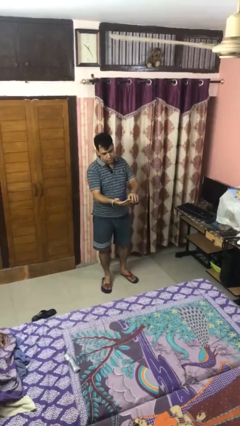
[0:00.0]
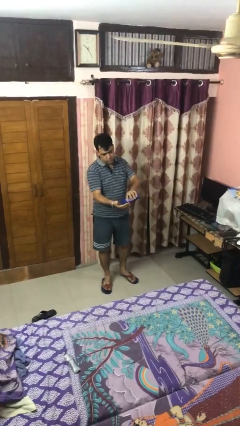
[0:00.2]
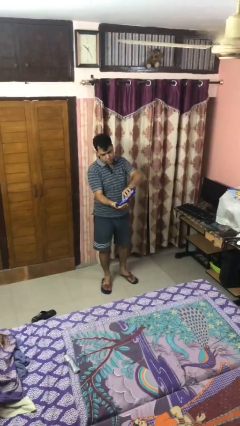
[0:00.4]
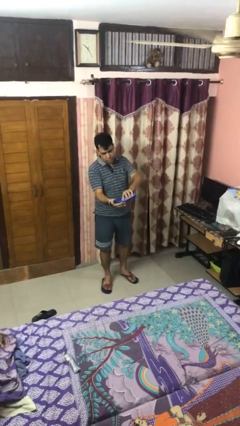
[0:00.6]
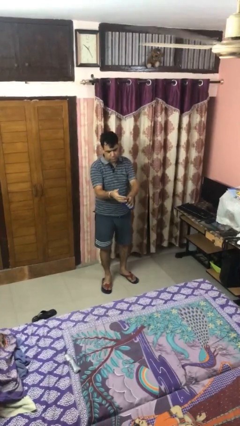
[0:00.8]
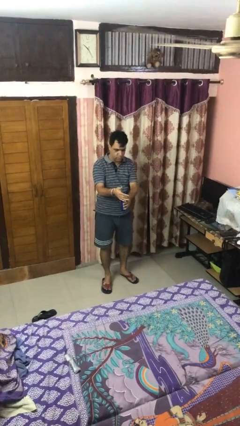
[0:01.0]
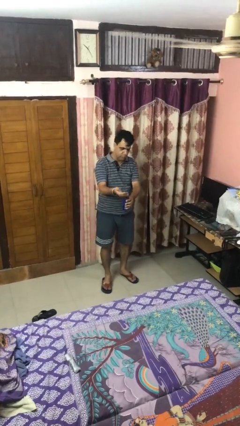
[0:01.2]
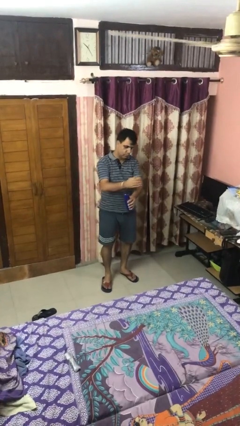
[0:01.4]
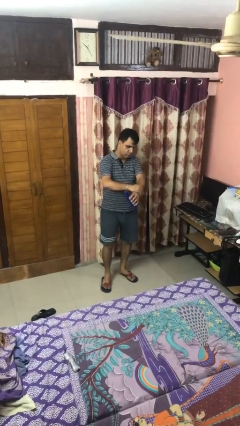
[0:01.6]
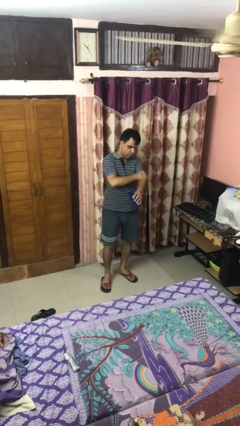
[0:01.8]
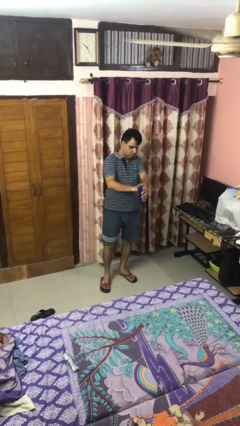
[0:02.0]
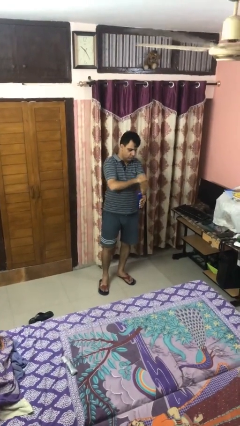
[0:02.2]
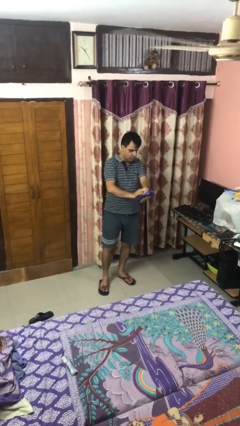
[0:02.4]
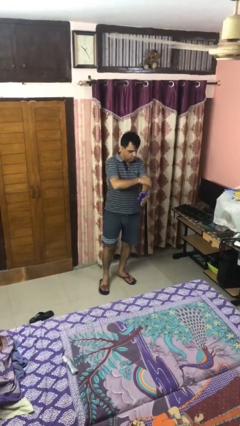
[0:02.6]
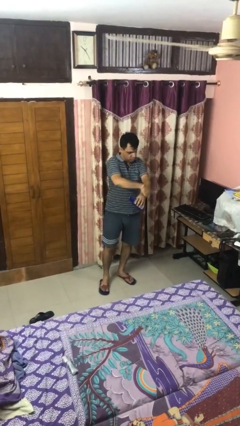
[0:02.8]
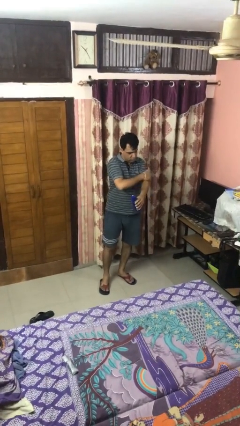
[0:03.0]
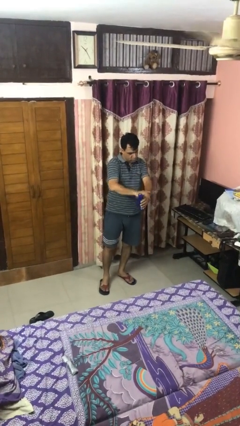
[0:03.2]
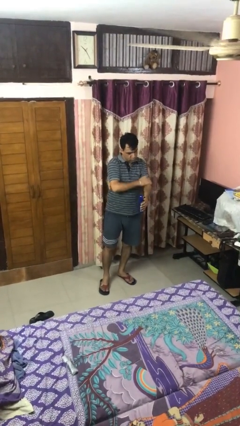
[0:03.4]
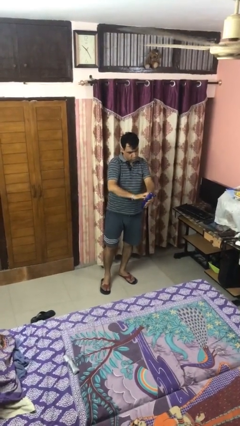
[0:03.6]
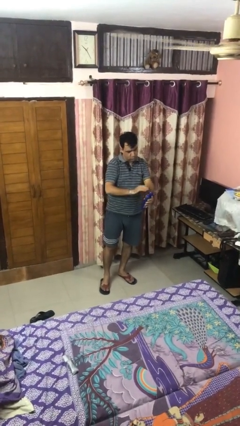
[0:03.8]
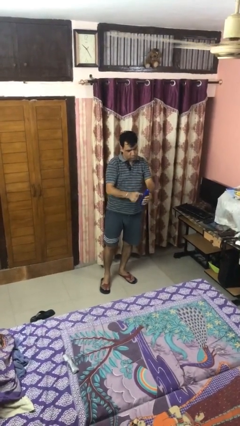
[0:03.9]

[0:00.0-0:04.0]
person applies sunscreen

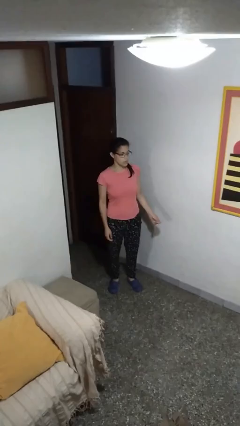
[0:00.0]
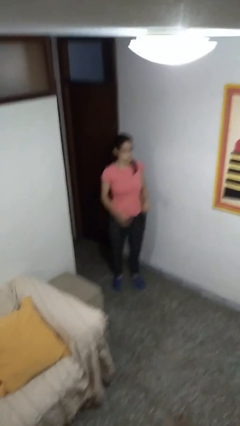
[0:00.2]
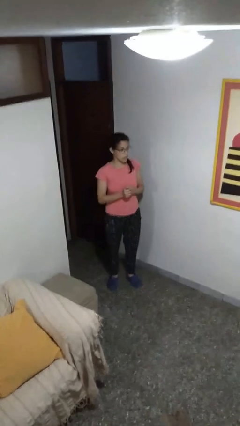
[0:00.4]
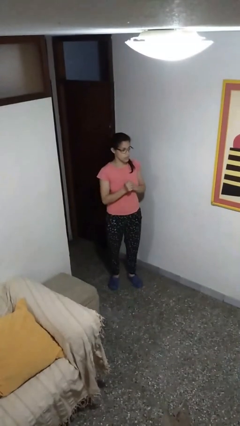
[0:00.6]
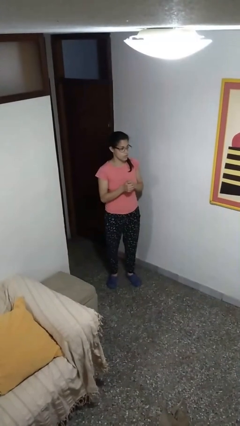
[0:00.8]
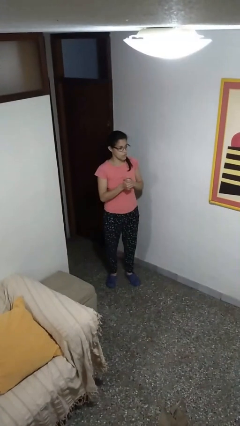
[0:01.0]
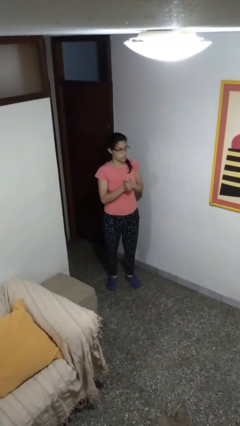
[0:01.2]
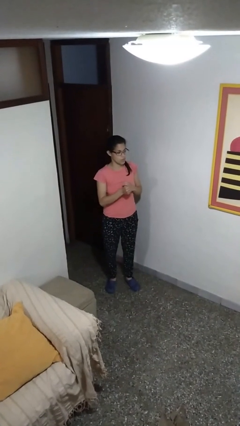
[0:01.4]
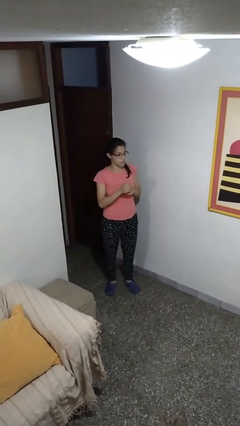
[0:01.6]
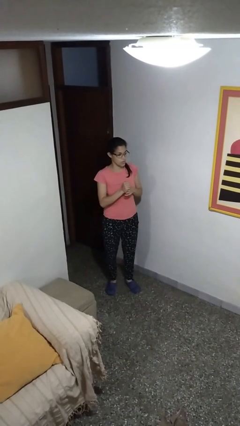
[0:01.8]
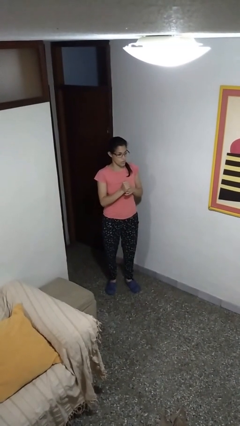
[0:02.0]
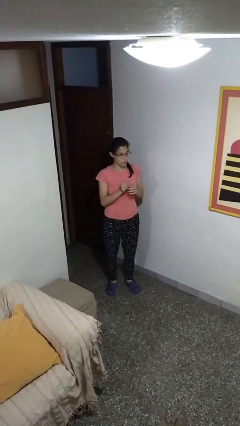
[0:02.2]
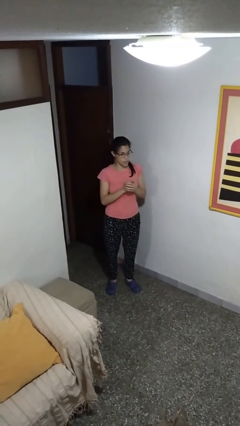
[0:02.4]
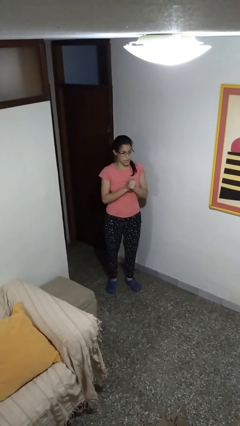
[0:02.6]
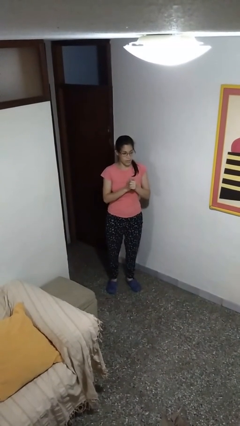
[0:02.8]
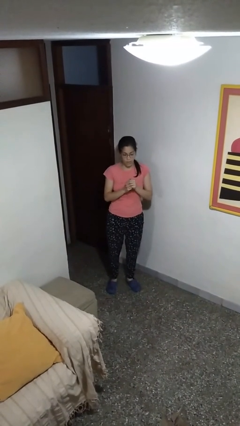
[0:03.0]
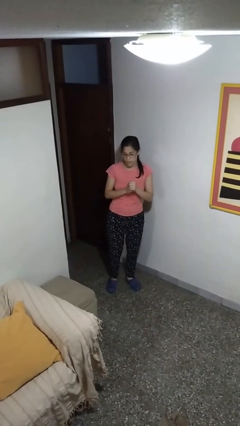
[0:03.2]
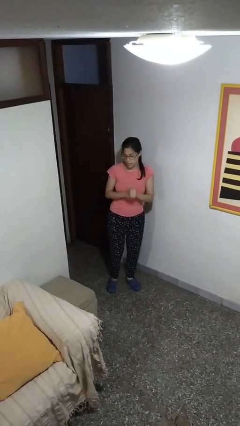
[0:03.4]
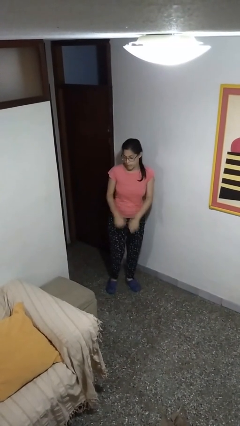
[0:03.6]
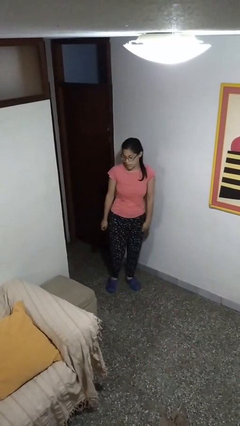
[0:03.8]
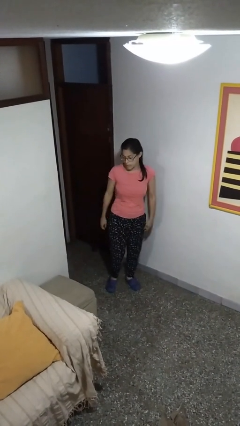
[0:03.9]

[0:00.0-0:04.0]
person cracks knuckles

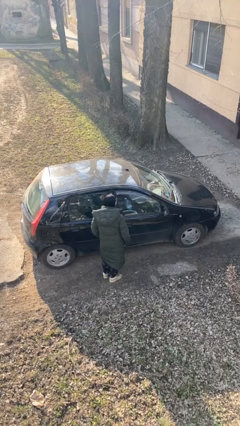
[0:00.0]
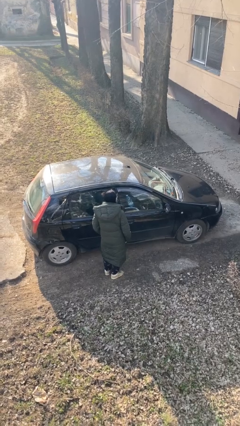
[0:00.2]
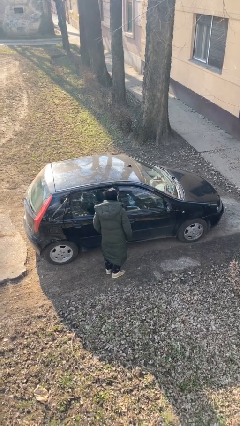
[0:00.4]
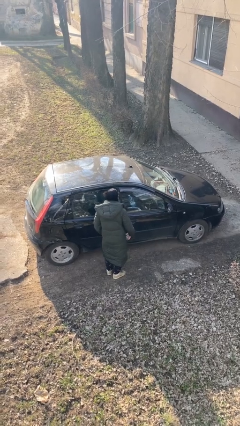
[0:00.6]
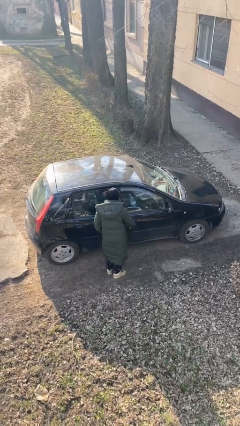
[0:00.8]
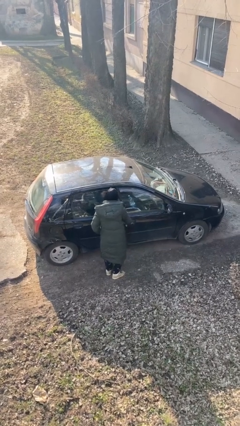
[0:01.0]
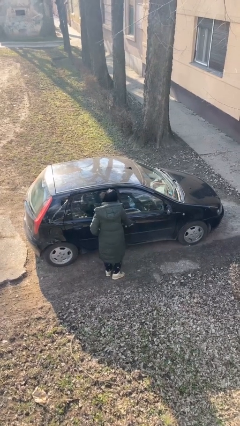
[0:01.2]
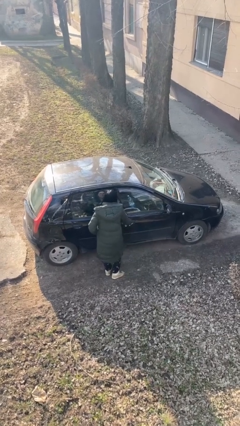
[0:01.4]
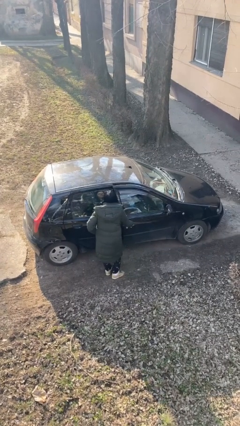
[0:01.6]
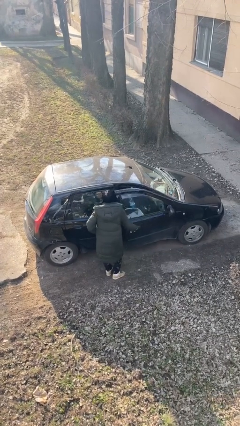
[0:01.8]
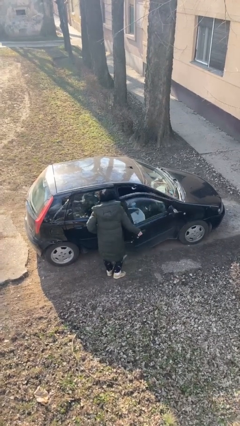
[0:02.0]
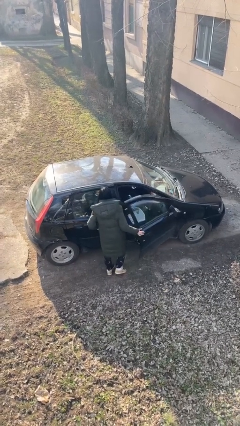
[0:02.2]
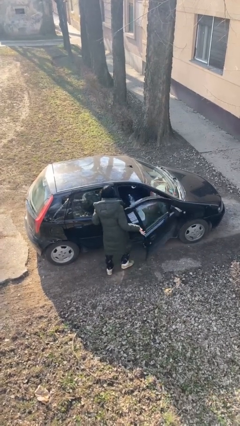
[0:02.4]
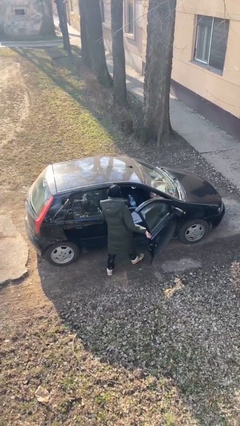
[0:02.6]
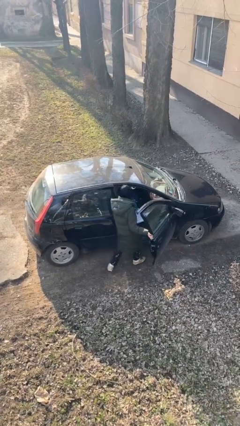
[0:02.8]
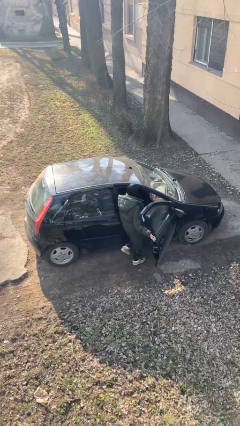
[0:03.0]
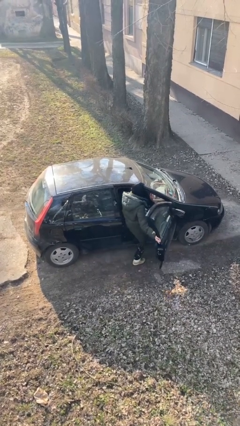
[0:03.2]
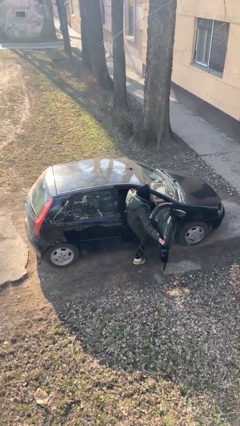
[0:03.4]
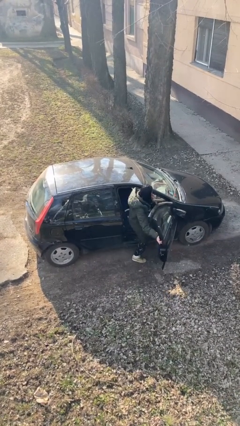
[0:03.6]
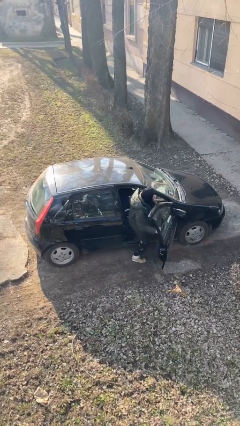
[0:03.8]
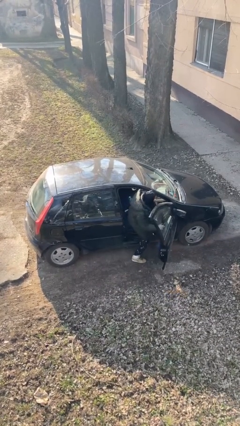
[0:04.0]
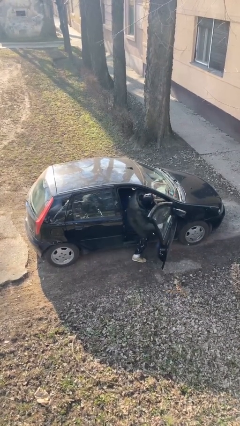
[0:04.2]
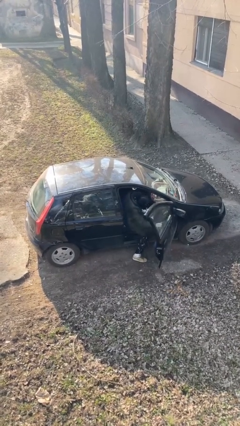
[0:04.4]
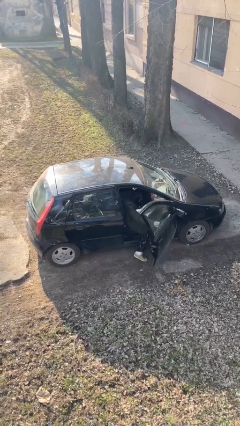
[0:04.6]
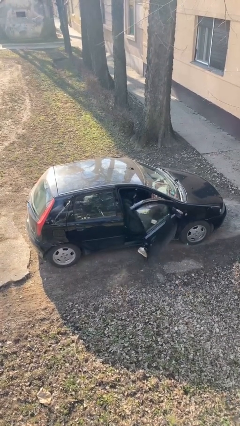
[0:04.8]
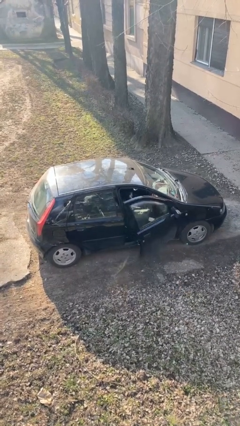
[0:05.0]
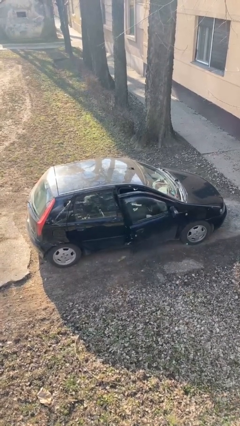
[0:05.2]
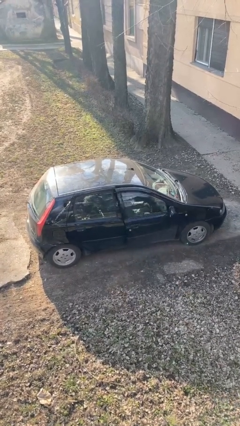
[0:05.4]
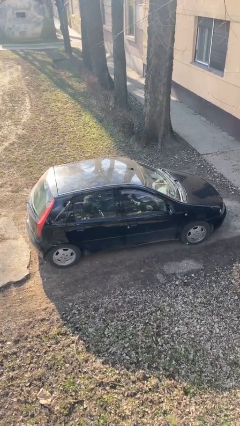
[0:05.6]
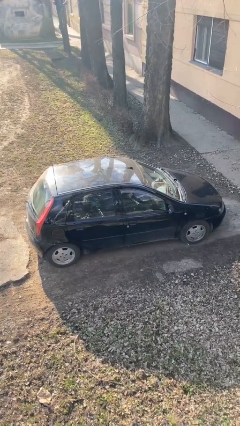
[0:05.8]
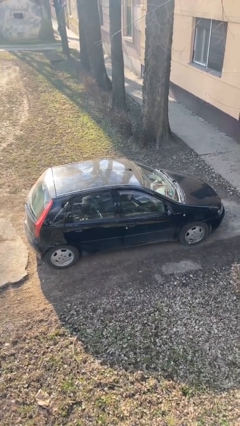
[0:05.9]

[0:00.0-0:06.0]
car picks up person

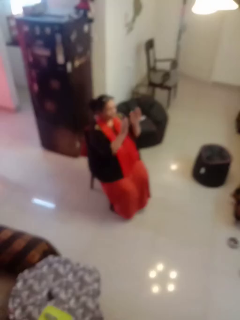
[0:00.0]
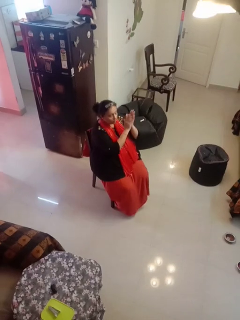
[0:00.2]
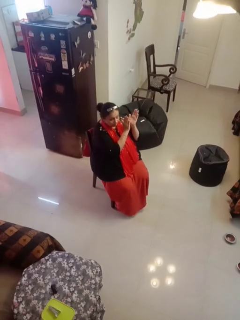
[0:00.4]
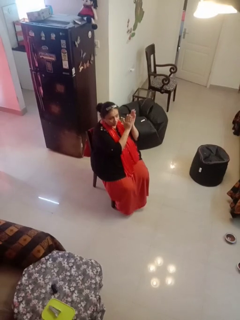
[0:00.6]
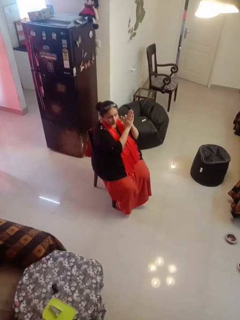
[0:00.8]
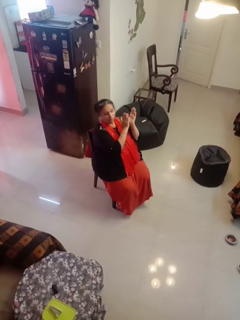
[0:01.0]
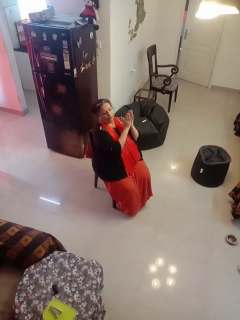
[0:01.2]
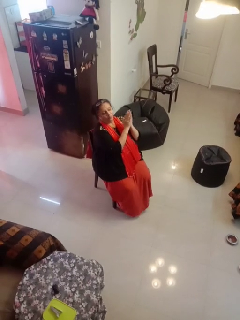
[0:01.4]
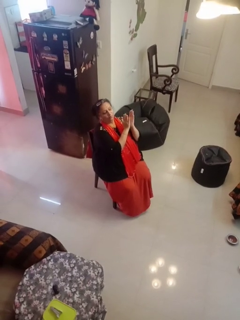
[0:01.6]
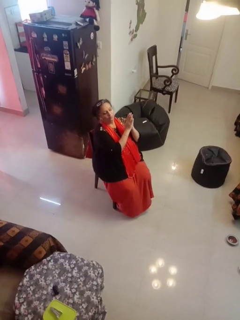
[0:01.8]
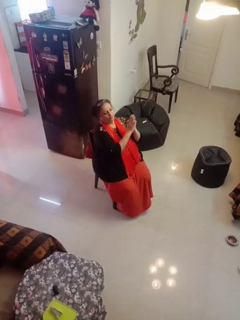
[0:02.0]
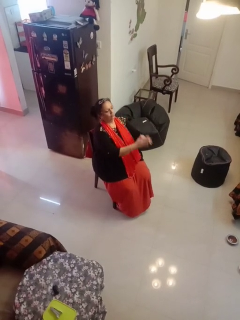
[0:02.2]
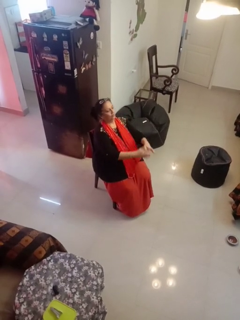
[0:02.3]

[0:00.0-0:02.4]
person claps hands

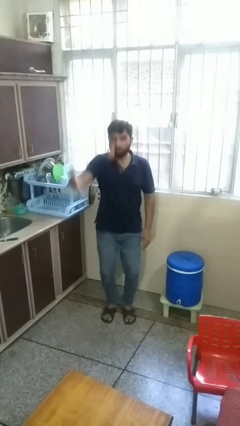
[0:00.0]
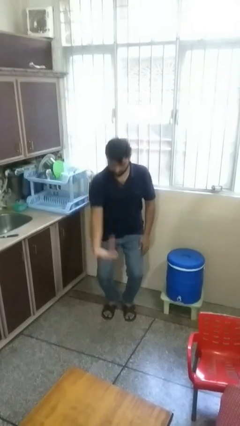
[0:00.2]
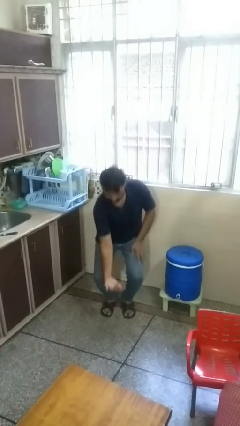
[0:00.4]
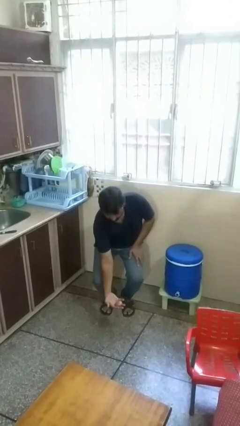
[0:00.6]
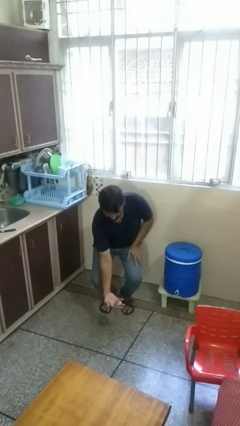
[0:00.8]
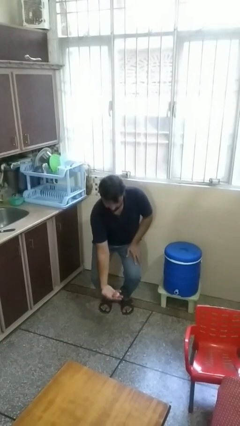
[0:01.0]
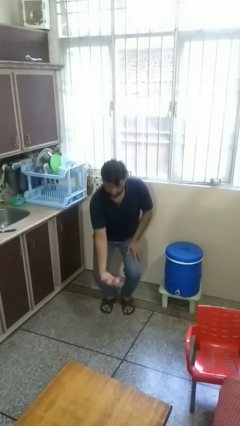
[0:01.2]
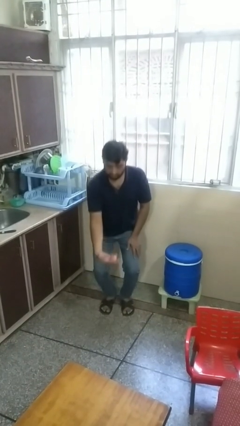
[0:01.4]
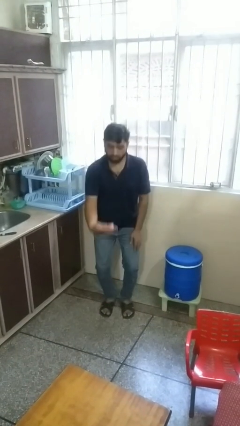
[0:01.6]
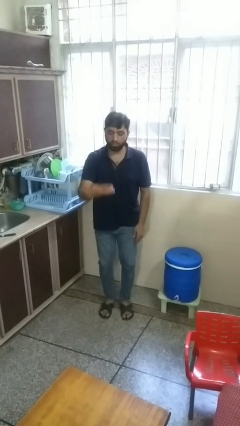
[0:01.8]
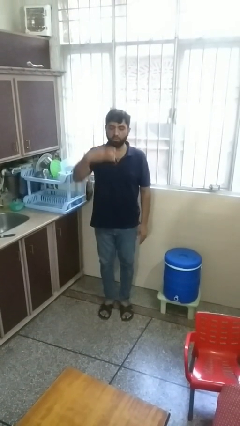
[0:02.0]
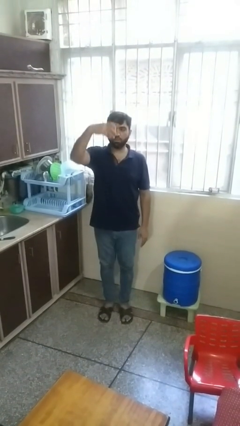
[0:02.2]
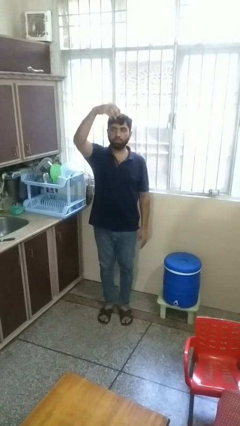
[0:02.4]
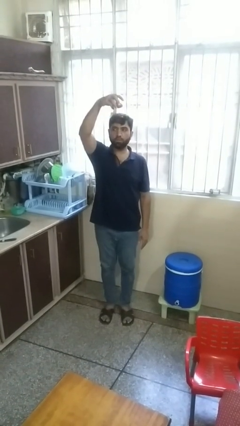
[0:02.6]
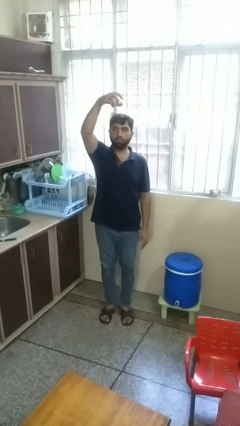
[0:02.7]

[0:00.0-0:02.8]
person catches dropped object
